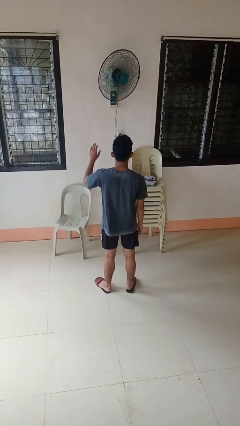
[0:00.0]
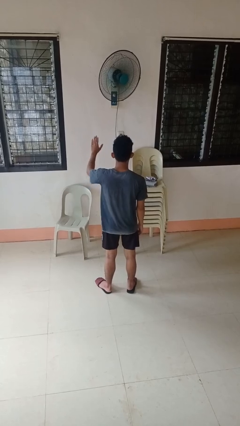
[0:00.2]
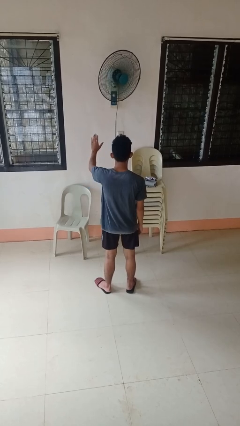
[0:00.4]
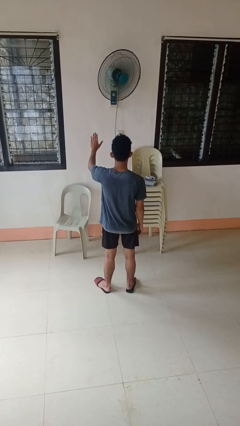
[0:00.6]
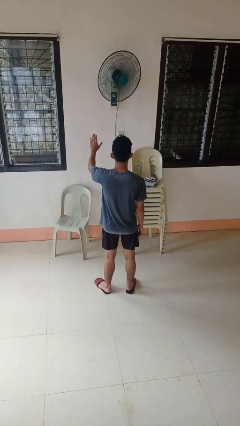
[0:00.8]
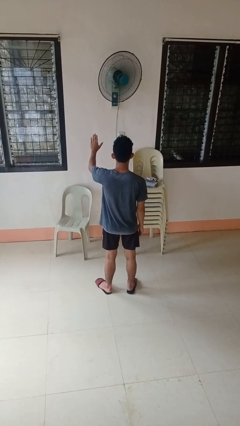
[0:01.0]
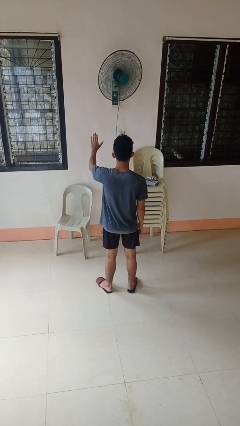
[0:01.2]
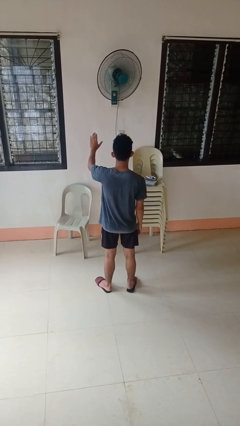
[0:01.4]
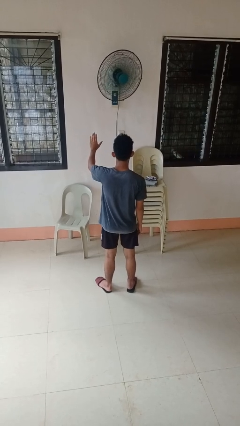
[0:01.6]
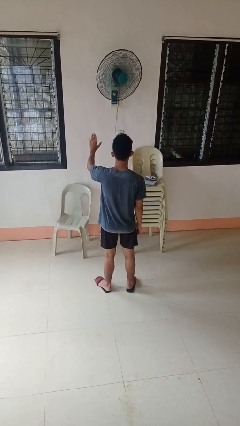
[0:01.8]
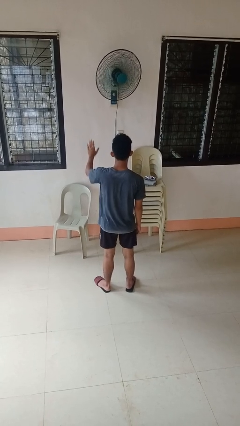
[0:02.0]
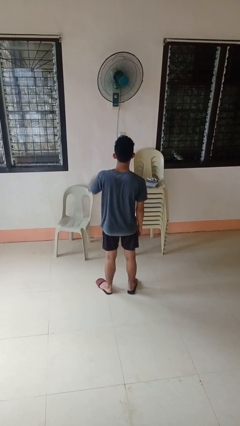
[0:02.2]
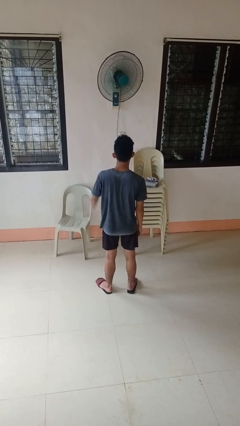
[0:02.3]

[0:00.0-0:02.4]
person gestures stop

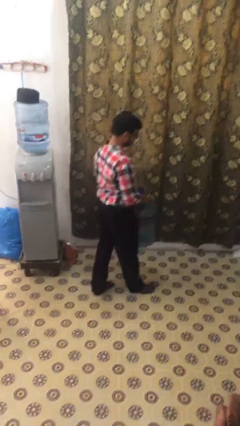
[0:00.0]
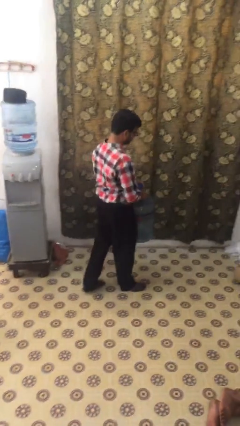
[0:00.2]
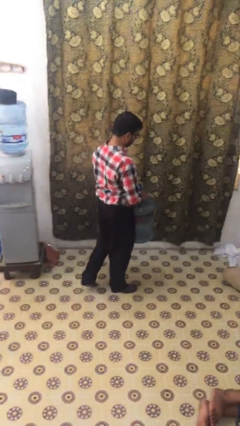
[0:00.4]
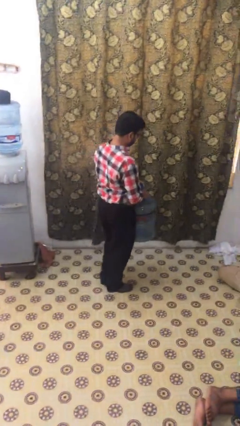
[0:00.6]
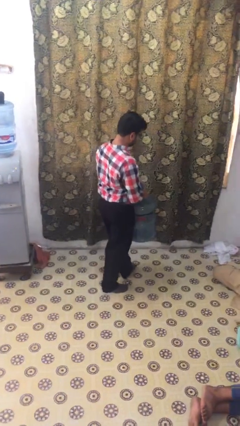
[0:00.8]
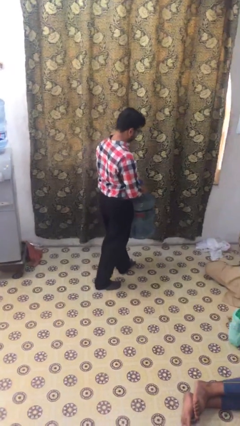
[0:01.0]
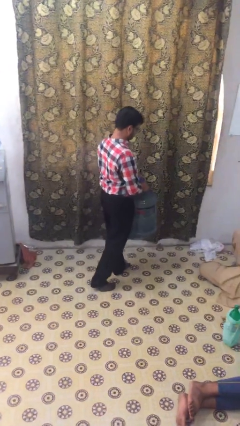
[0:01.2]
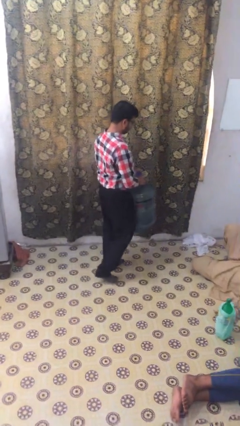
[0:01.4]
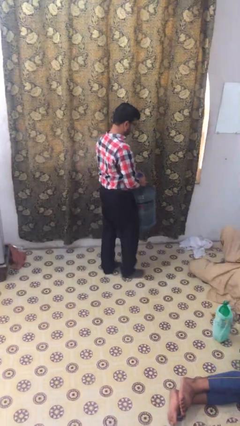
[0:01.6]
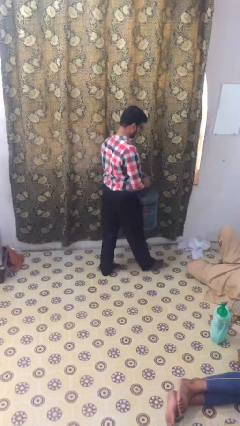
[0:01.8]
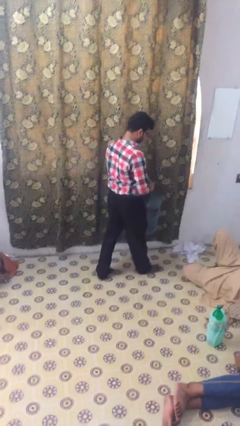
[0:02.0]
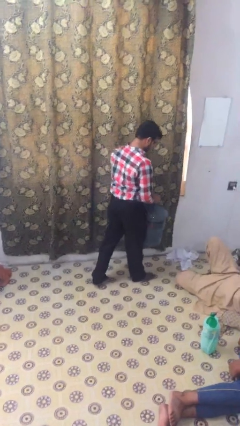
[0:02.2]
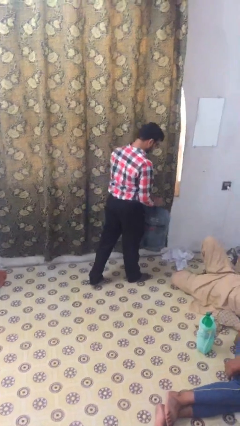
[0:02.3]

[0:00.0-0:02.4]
person steals object from person

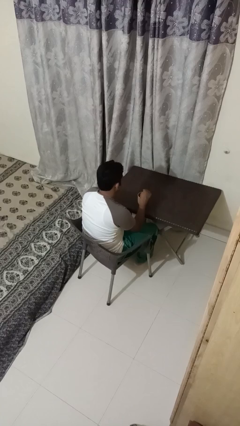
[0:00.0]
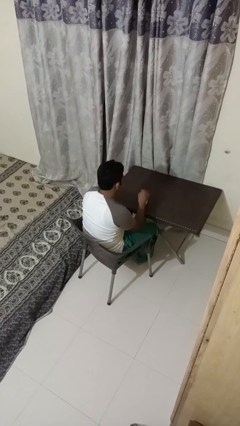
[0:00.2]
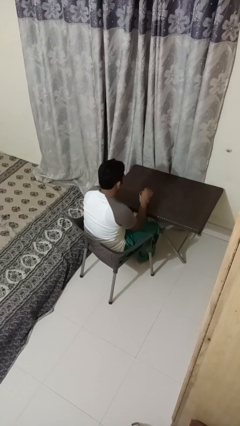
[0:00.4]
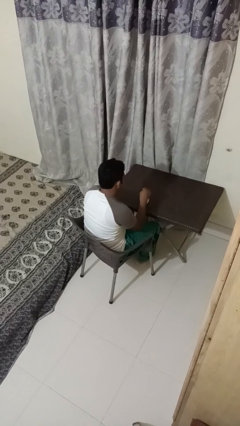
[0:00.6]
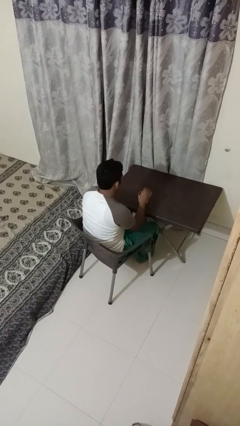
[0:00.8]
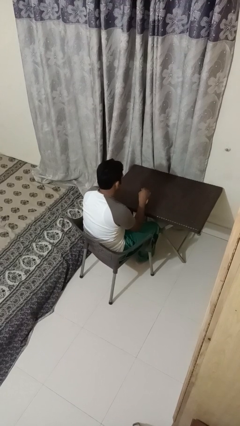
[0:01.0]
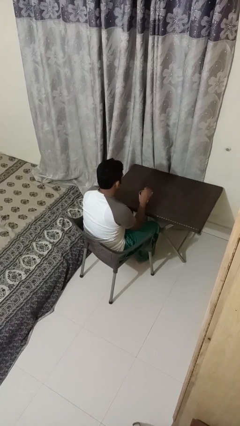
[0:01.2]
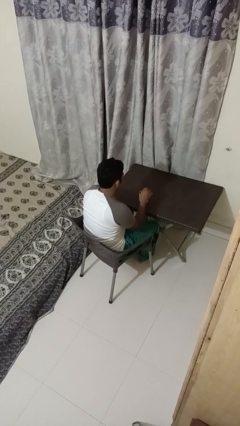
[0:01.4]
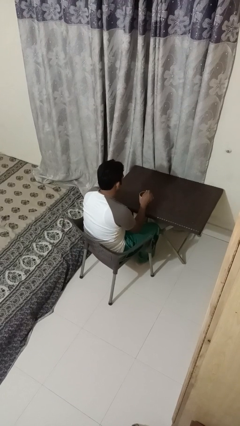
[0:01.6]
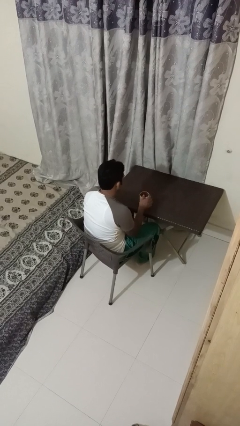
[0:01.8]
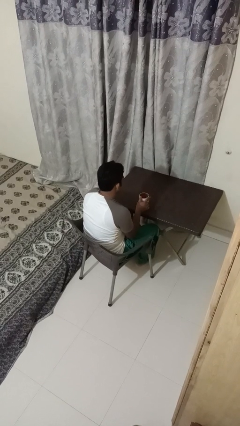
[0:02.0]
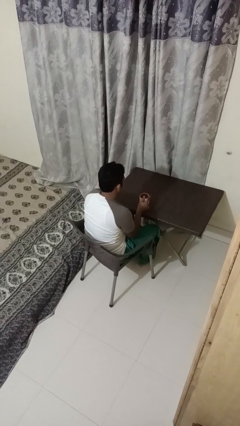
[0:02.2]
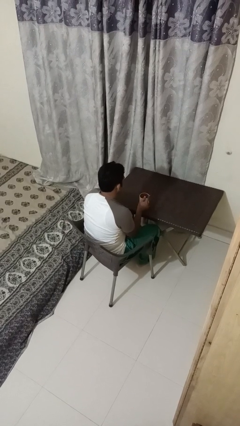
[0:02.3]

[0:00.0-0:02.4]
person stirs mug

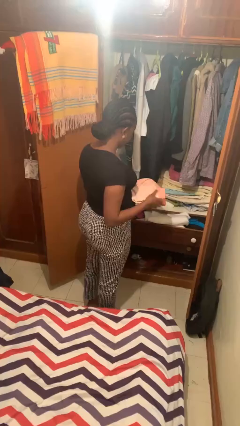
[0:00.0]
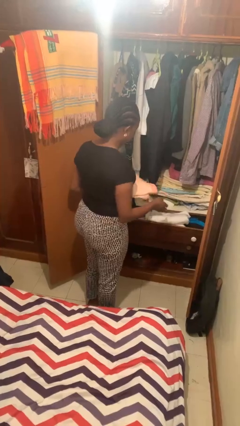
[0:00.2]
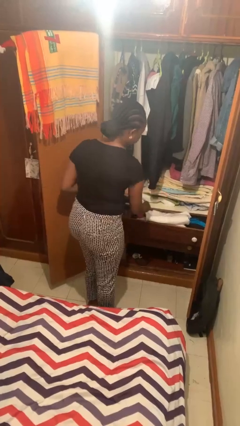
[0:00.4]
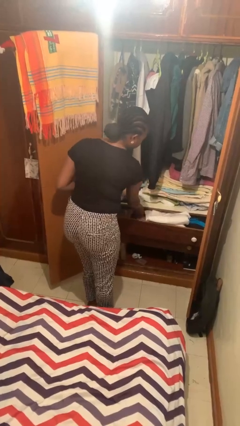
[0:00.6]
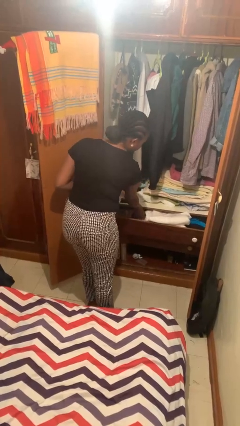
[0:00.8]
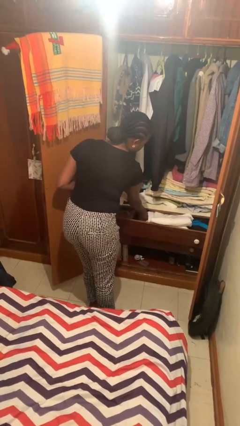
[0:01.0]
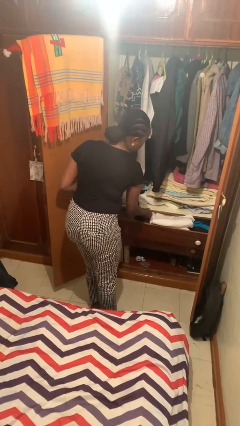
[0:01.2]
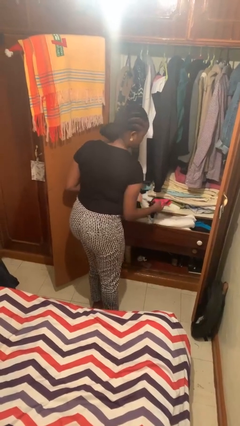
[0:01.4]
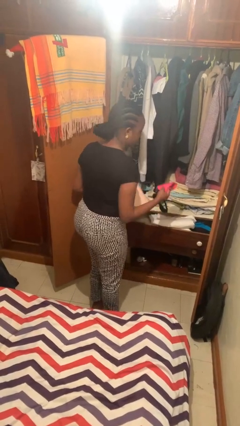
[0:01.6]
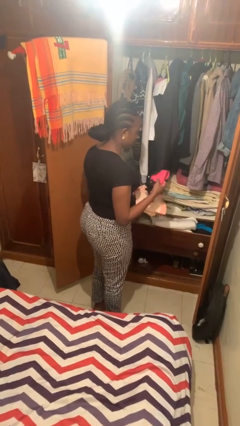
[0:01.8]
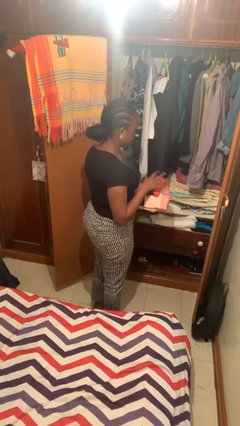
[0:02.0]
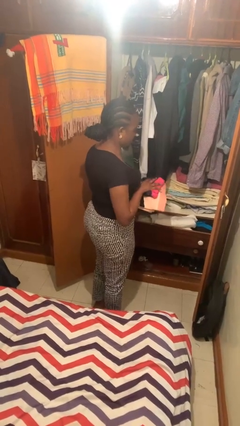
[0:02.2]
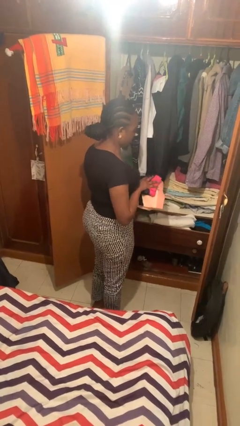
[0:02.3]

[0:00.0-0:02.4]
person takes clothes from dresser

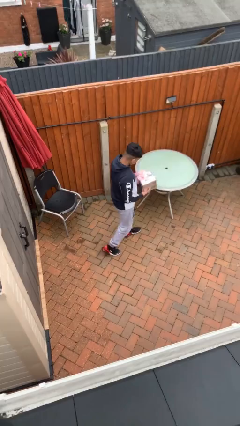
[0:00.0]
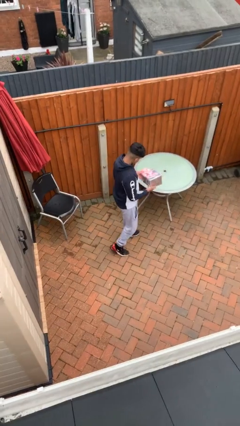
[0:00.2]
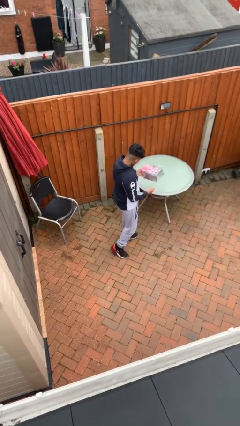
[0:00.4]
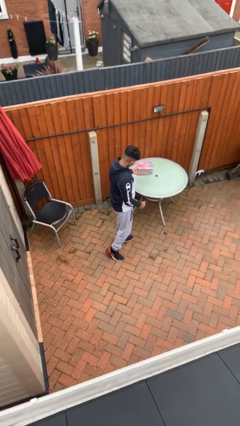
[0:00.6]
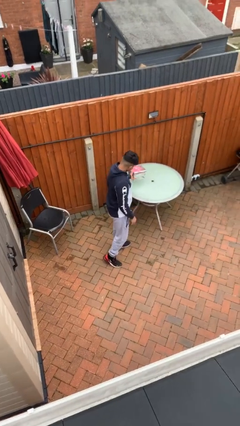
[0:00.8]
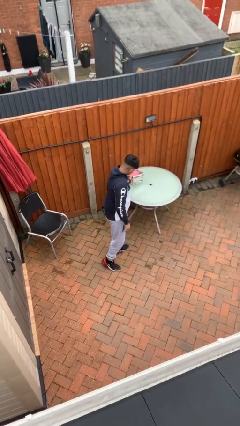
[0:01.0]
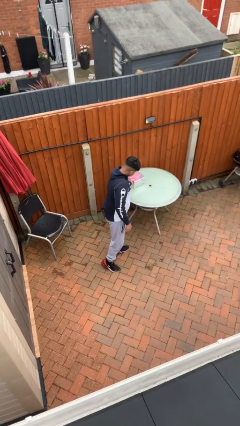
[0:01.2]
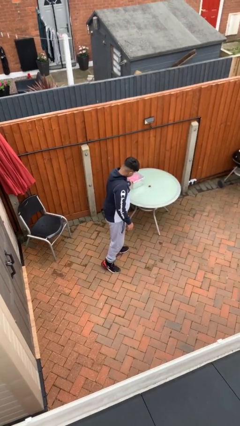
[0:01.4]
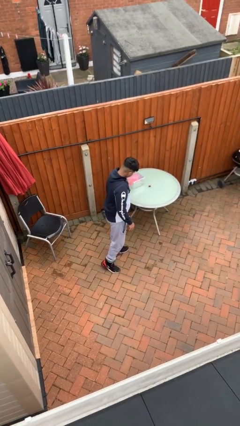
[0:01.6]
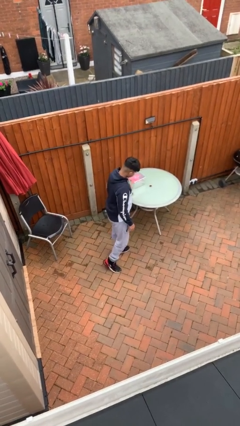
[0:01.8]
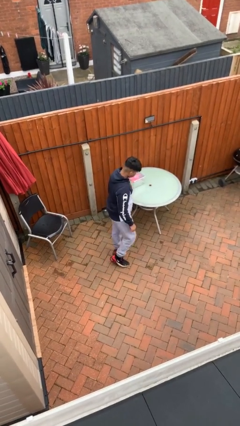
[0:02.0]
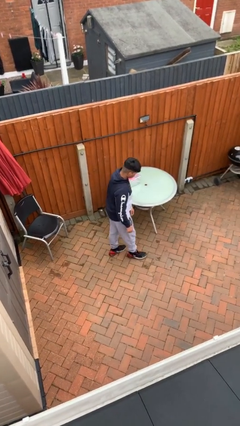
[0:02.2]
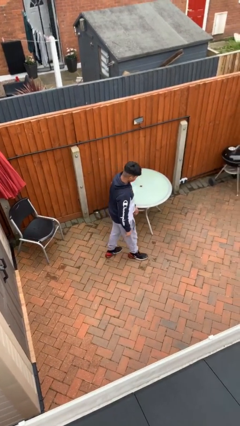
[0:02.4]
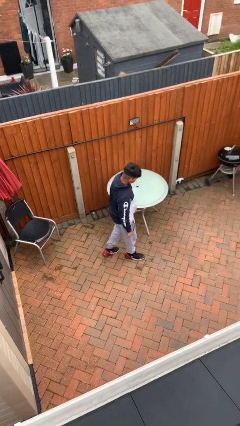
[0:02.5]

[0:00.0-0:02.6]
person puts down object on table

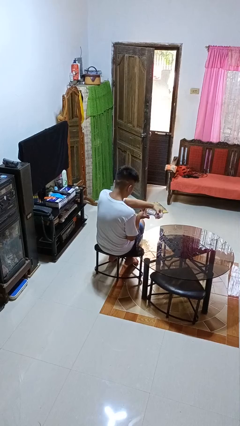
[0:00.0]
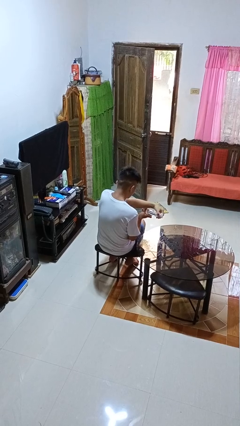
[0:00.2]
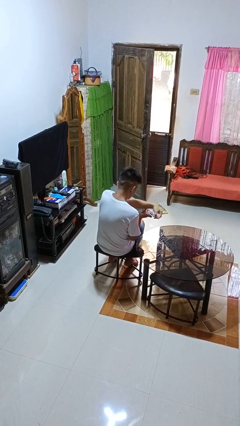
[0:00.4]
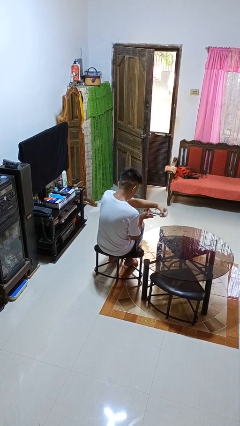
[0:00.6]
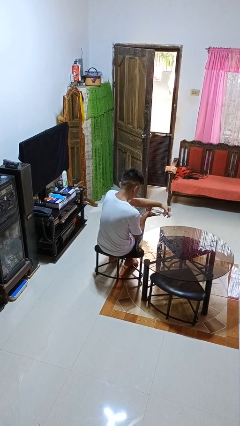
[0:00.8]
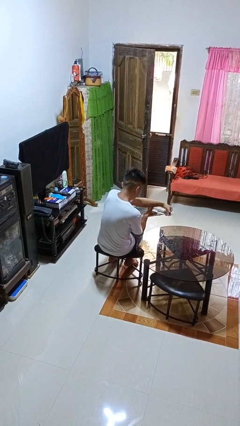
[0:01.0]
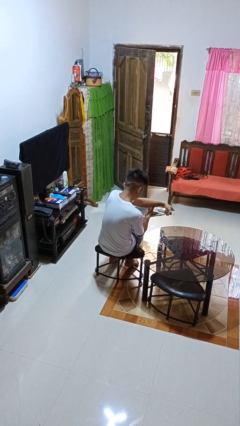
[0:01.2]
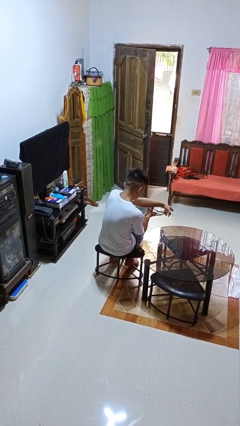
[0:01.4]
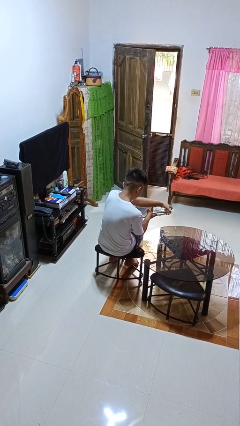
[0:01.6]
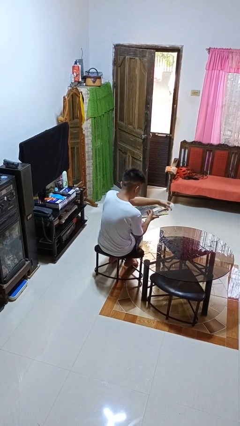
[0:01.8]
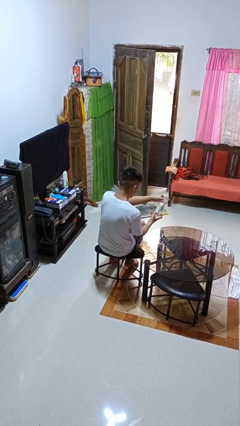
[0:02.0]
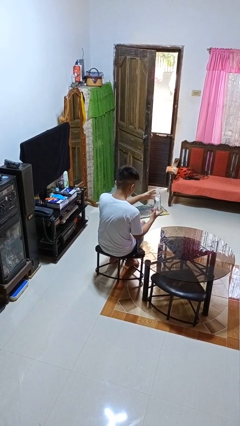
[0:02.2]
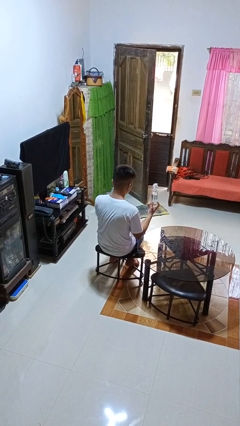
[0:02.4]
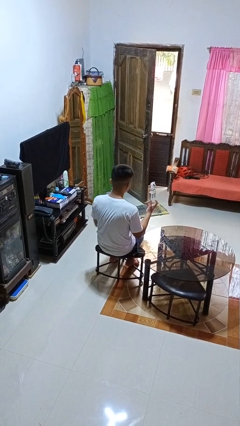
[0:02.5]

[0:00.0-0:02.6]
person sprays from bottle

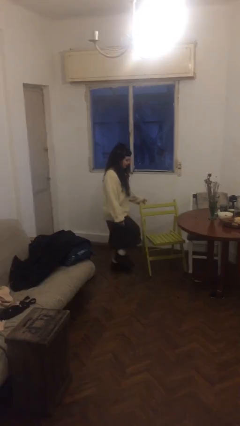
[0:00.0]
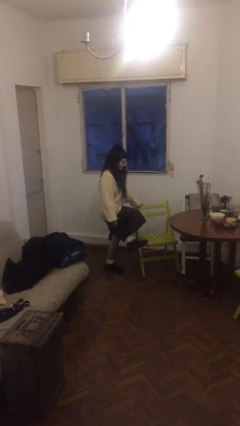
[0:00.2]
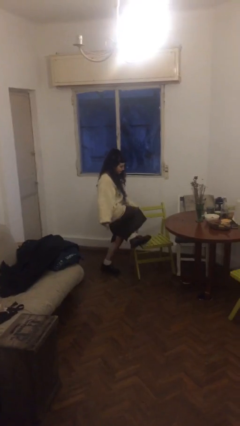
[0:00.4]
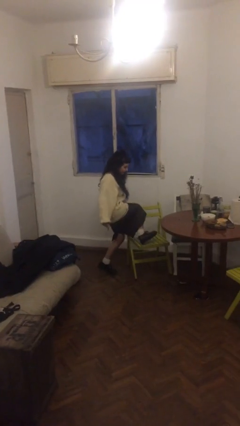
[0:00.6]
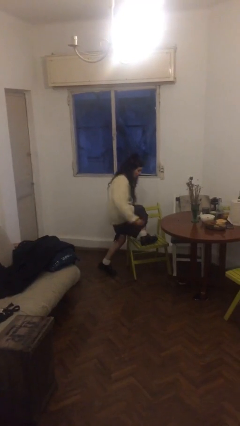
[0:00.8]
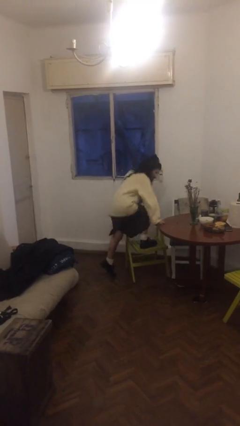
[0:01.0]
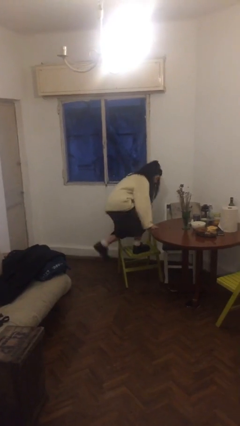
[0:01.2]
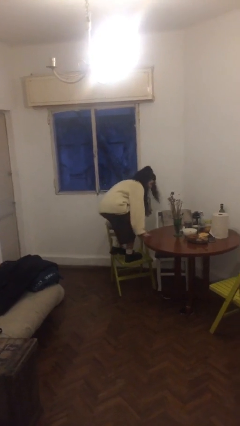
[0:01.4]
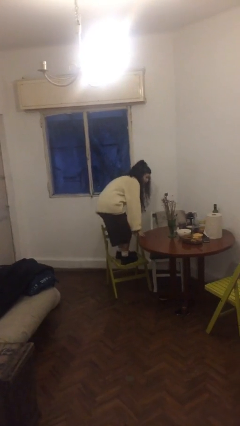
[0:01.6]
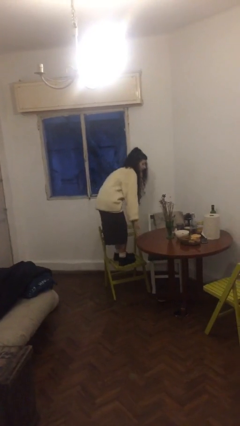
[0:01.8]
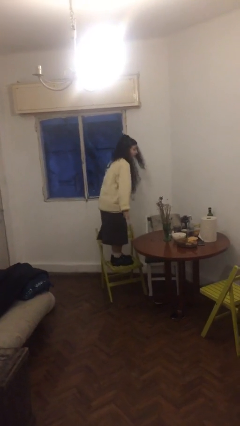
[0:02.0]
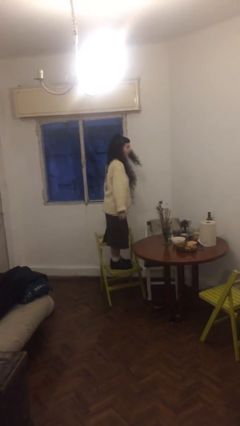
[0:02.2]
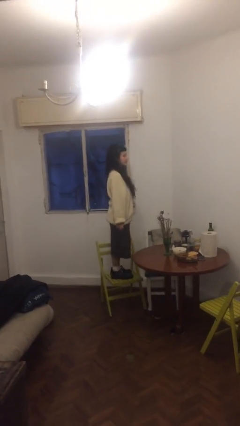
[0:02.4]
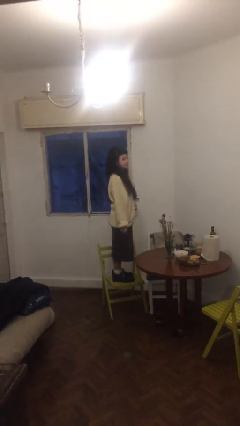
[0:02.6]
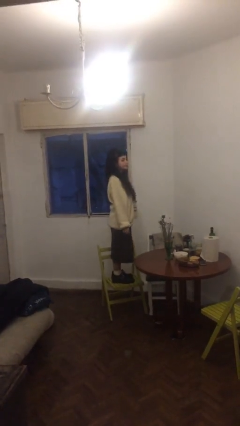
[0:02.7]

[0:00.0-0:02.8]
person climbs on chair
